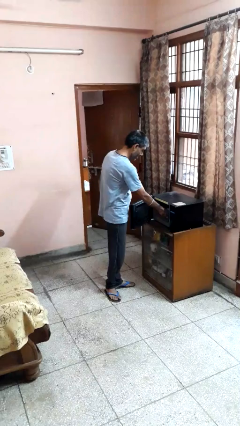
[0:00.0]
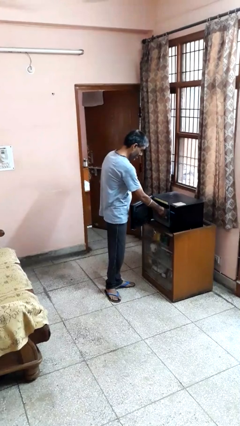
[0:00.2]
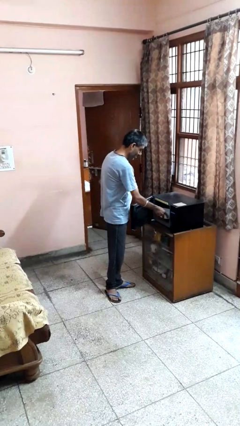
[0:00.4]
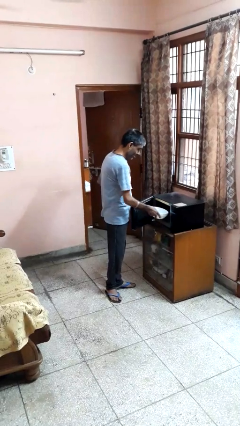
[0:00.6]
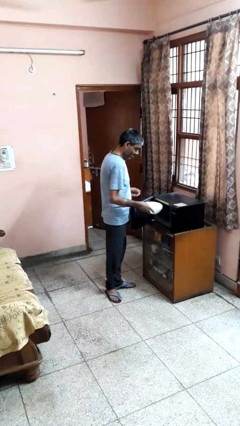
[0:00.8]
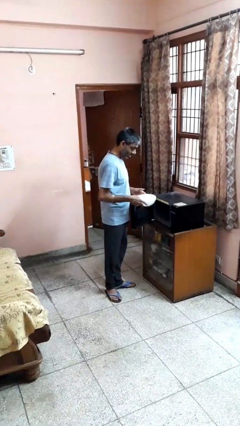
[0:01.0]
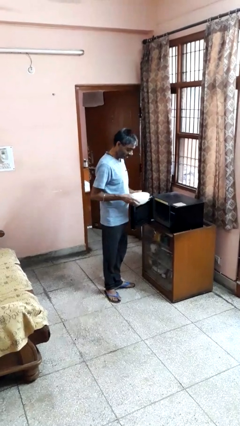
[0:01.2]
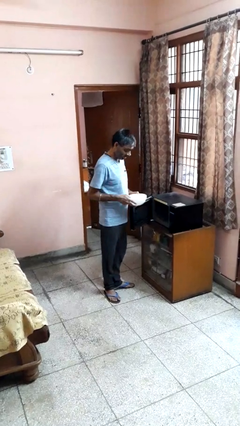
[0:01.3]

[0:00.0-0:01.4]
person takes object from microwave

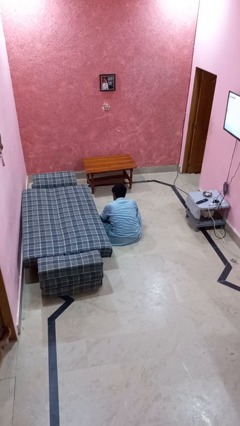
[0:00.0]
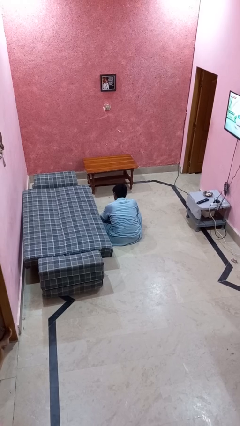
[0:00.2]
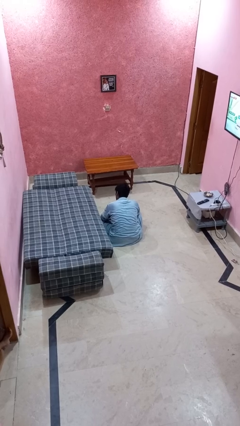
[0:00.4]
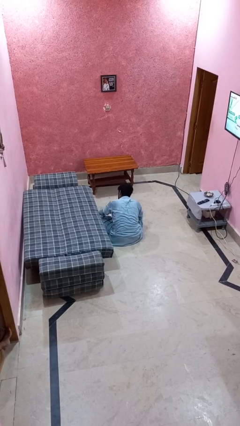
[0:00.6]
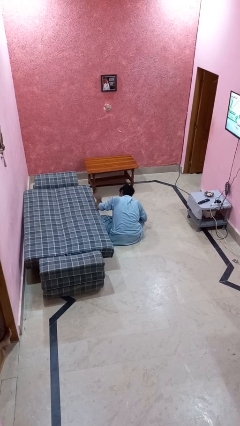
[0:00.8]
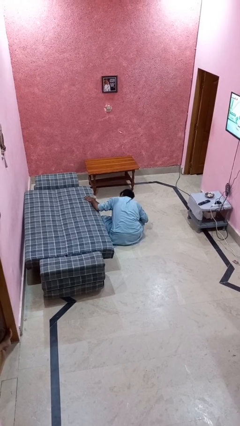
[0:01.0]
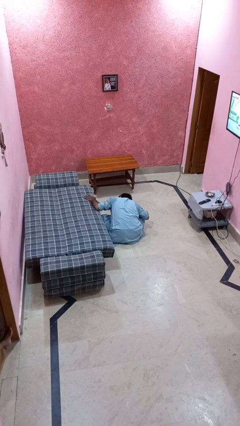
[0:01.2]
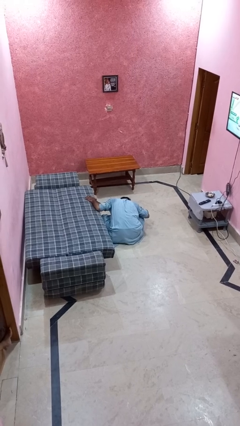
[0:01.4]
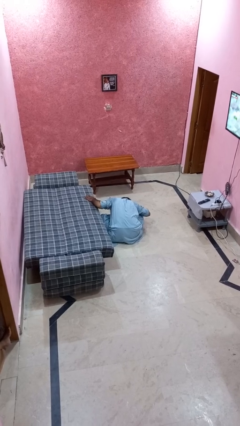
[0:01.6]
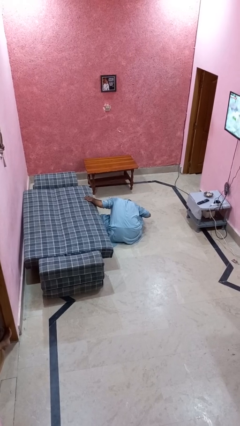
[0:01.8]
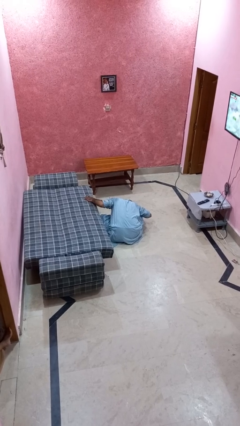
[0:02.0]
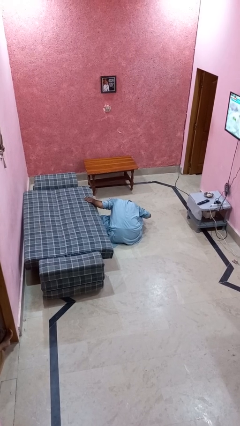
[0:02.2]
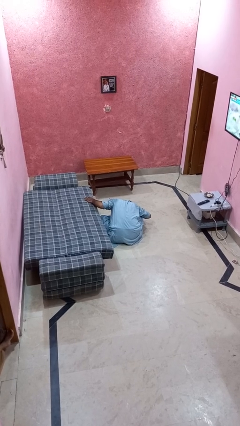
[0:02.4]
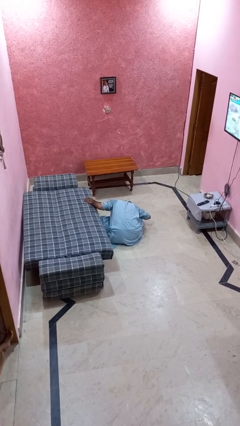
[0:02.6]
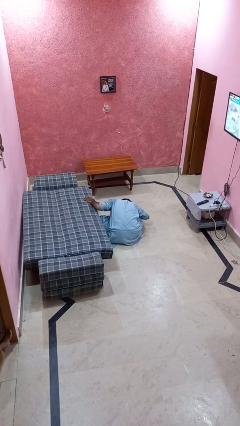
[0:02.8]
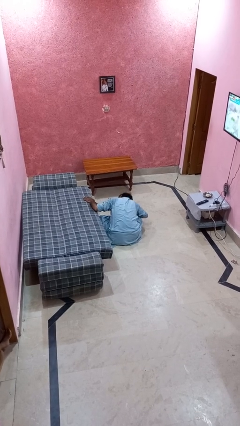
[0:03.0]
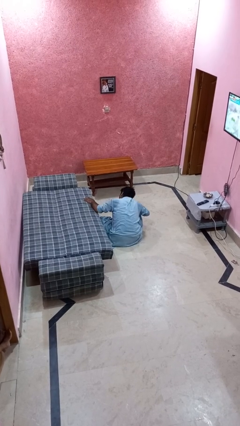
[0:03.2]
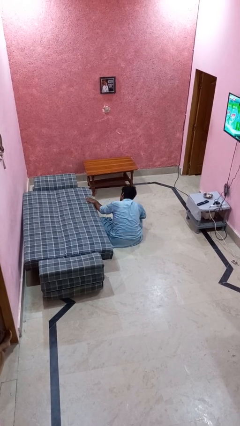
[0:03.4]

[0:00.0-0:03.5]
person searches under bed

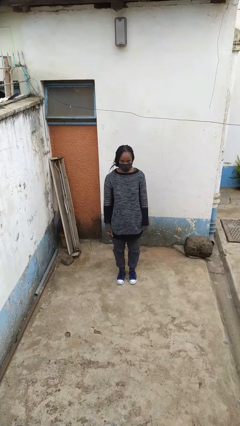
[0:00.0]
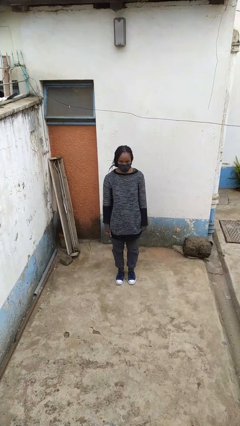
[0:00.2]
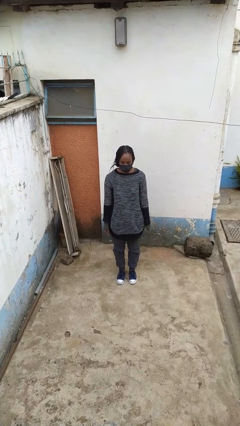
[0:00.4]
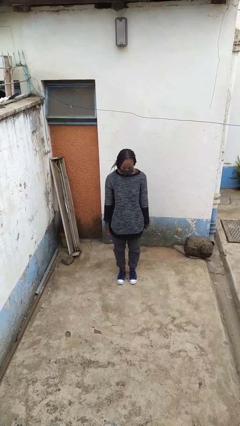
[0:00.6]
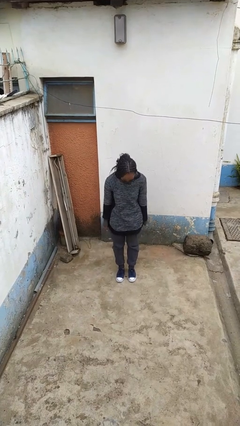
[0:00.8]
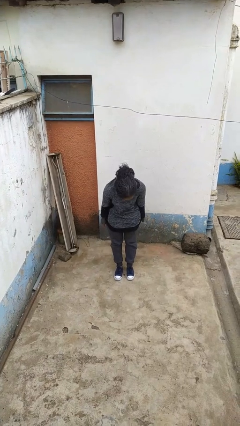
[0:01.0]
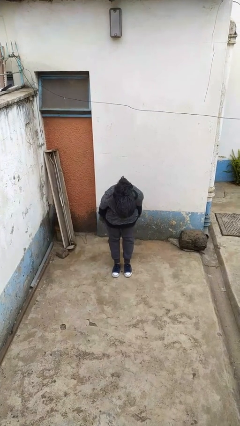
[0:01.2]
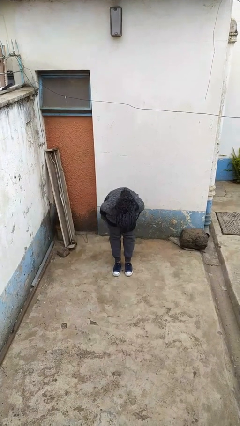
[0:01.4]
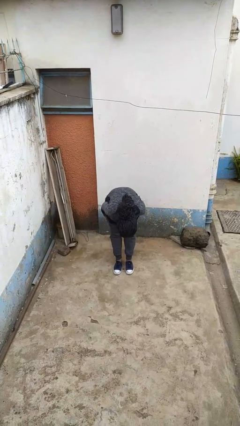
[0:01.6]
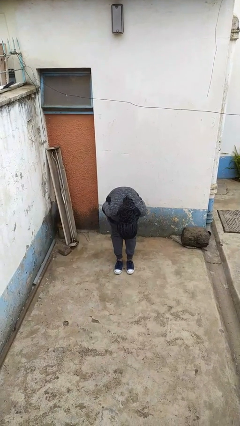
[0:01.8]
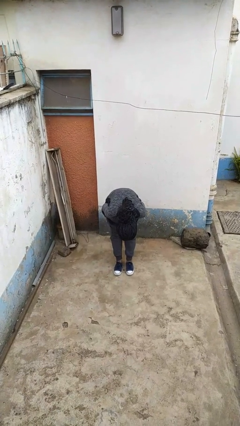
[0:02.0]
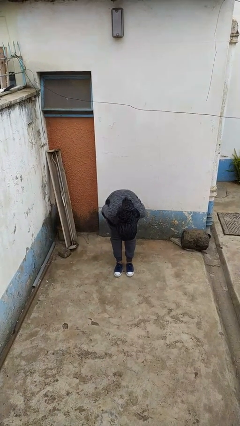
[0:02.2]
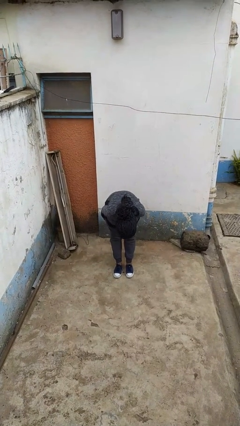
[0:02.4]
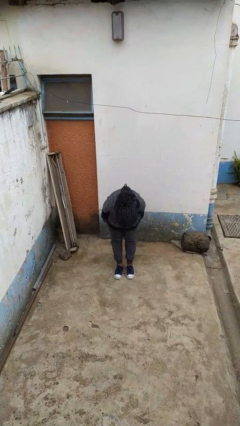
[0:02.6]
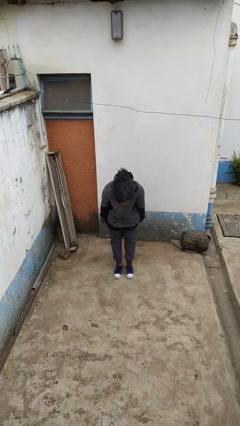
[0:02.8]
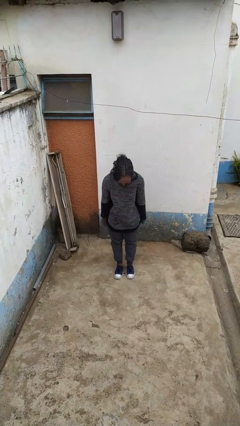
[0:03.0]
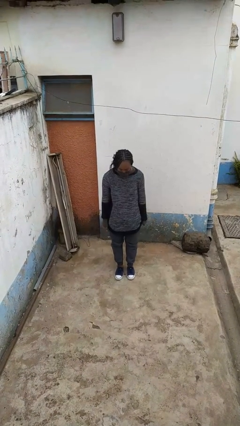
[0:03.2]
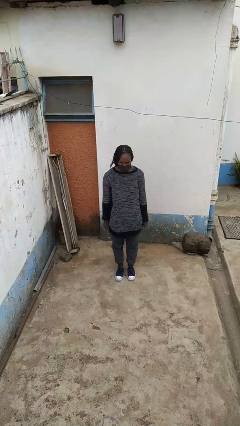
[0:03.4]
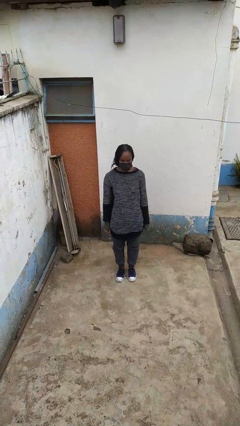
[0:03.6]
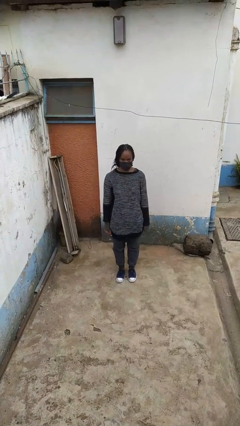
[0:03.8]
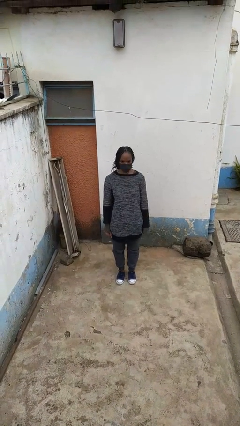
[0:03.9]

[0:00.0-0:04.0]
person bows

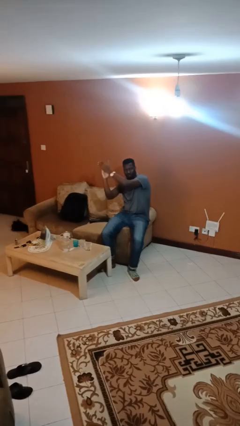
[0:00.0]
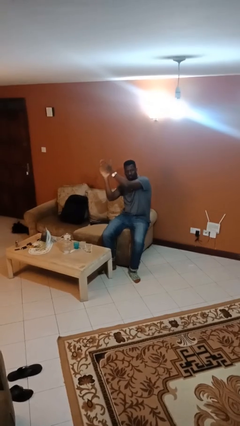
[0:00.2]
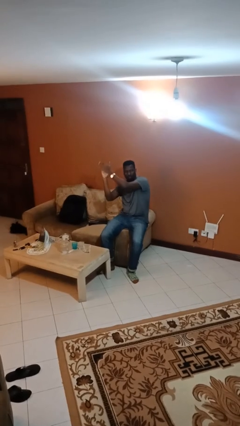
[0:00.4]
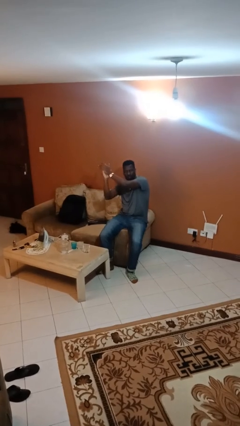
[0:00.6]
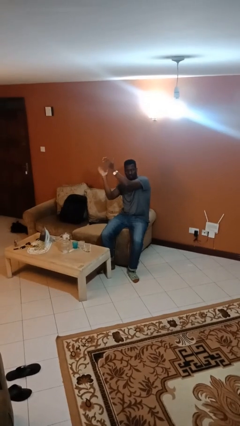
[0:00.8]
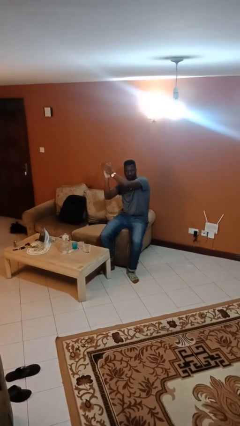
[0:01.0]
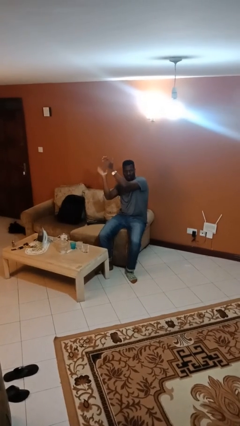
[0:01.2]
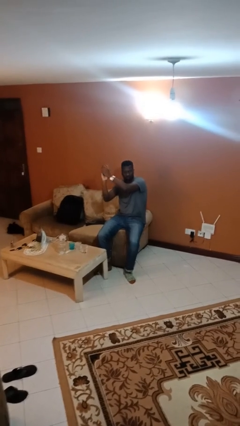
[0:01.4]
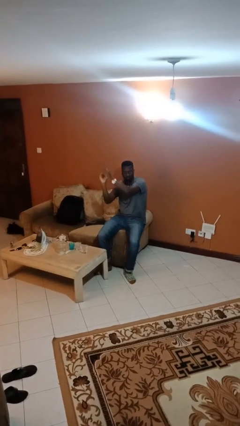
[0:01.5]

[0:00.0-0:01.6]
person claps hands

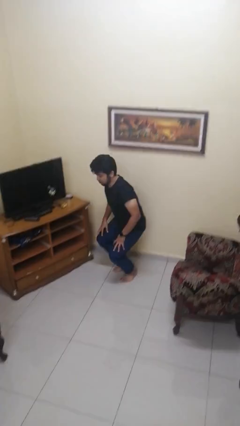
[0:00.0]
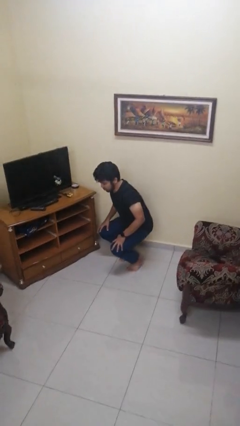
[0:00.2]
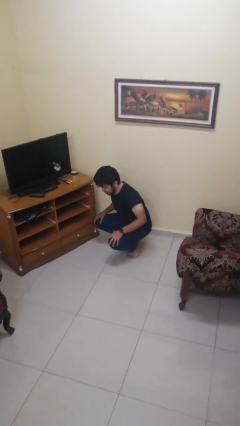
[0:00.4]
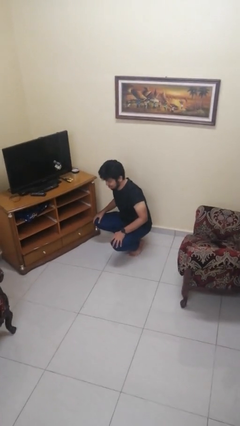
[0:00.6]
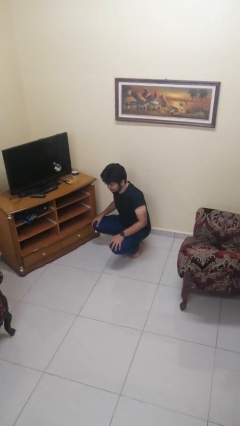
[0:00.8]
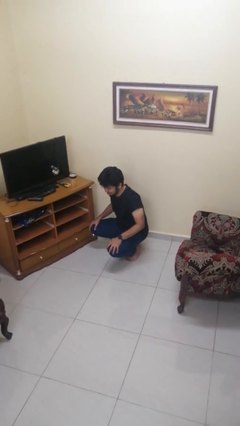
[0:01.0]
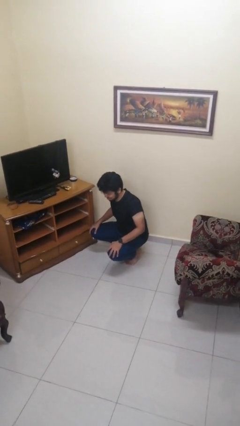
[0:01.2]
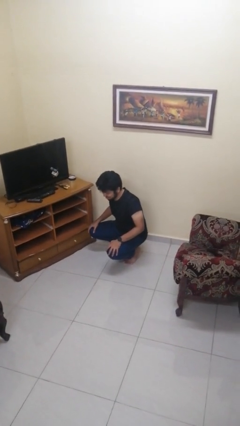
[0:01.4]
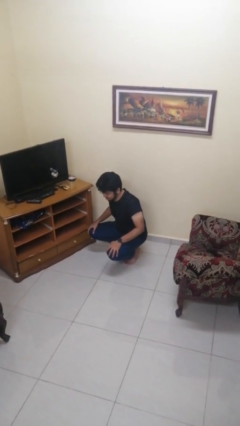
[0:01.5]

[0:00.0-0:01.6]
person squats

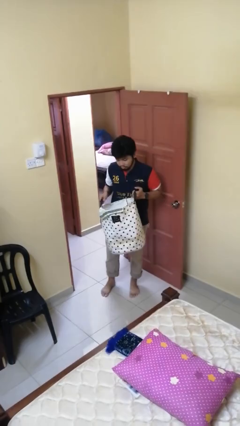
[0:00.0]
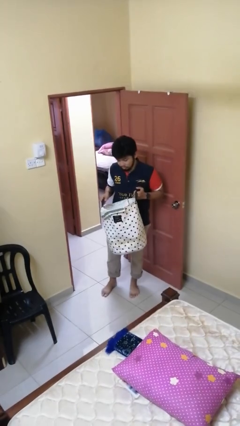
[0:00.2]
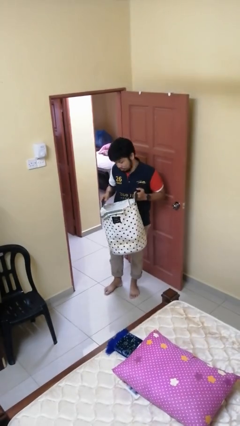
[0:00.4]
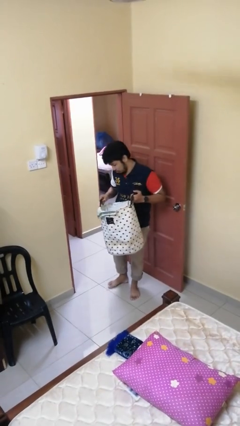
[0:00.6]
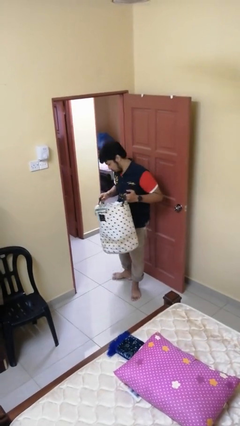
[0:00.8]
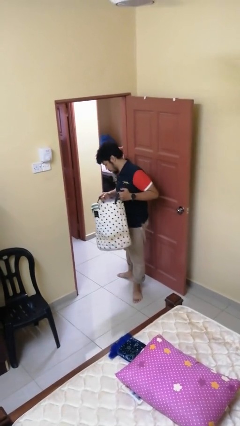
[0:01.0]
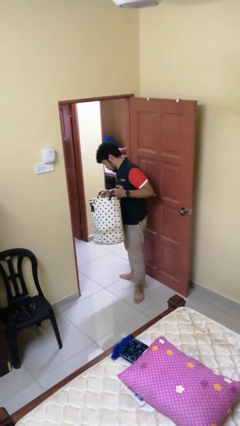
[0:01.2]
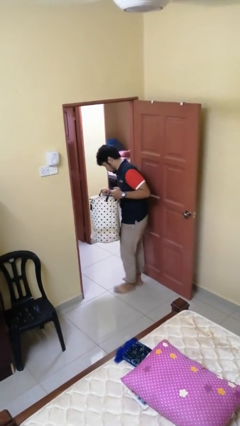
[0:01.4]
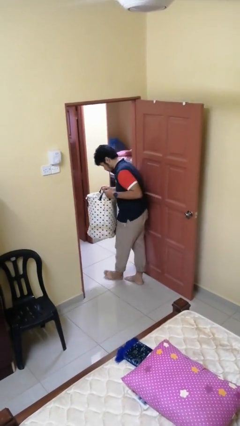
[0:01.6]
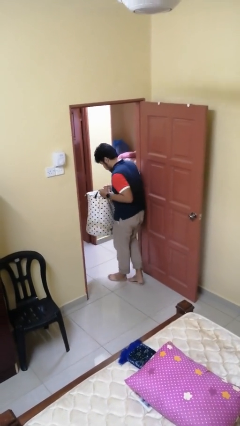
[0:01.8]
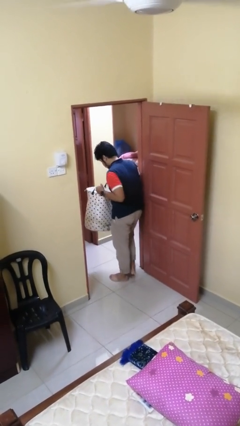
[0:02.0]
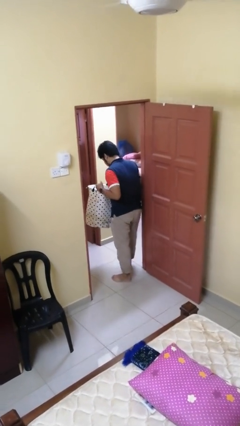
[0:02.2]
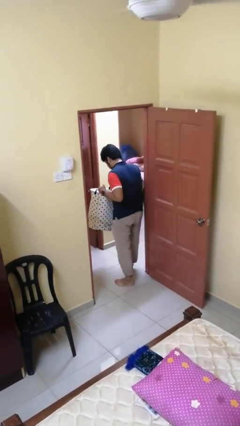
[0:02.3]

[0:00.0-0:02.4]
person carries laundry basket

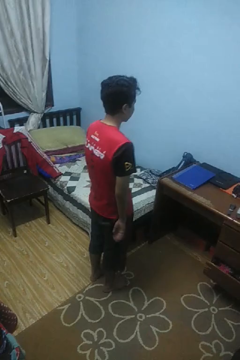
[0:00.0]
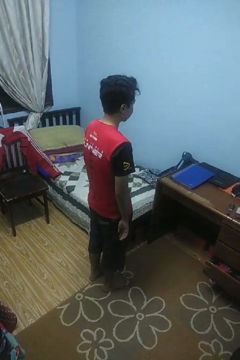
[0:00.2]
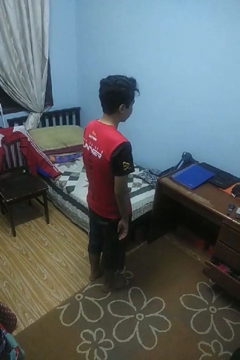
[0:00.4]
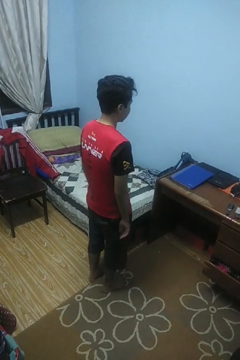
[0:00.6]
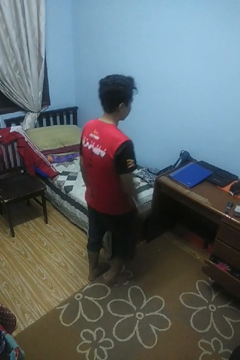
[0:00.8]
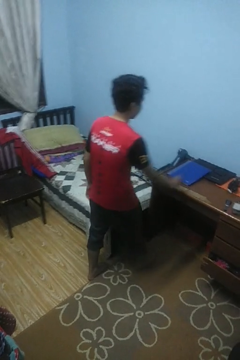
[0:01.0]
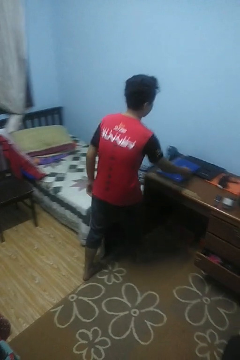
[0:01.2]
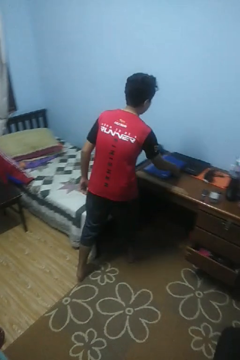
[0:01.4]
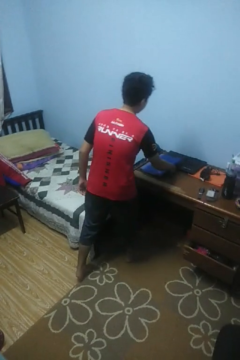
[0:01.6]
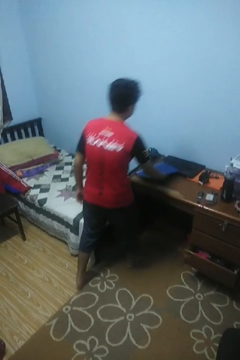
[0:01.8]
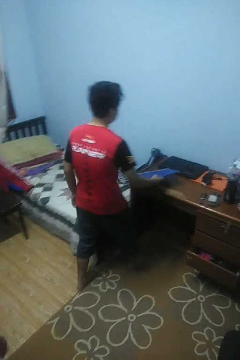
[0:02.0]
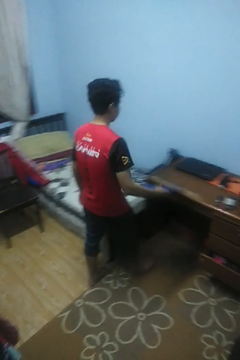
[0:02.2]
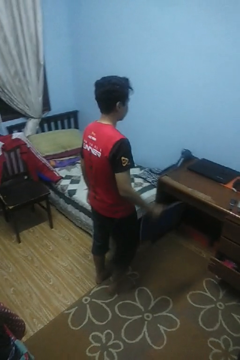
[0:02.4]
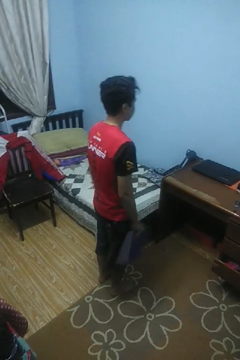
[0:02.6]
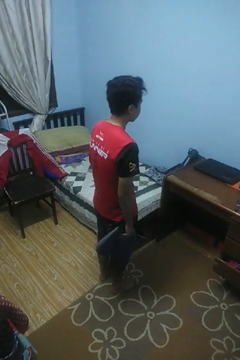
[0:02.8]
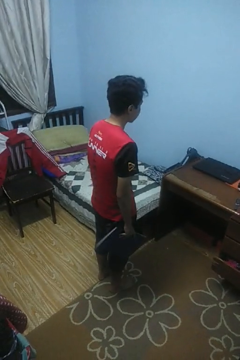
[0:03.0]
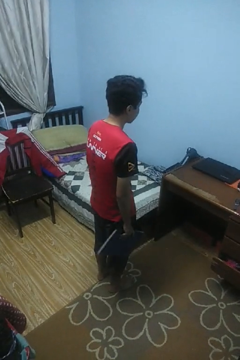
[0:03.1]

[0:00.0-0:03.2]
person picks up object from table
